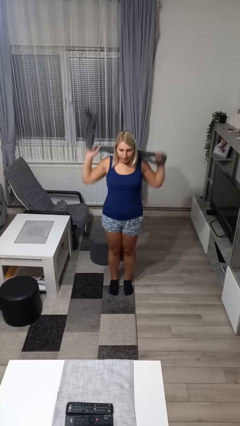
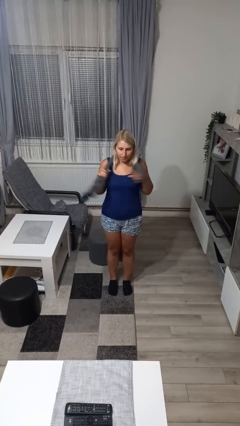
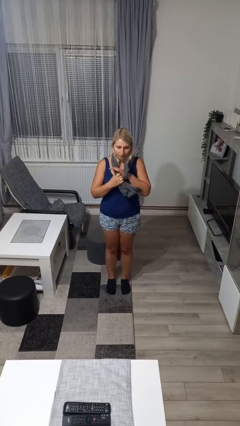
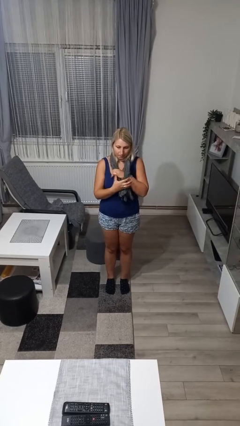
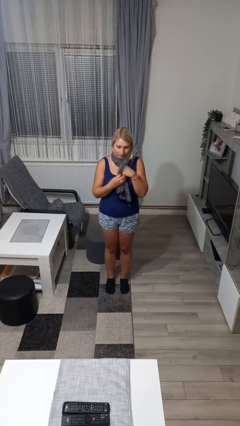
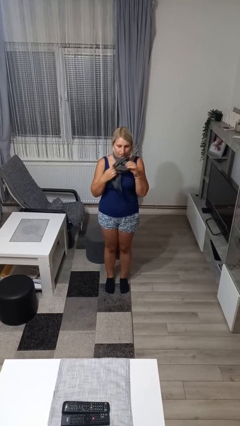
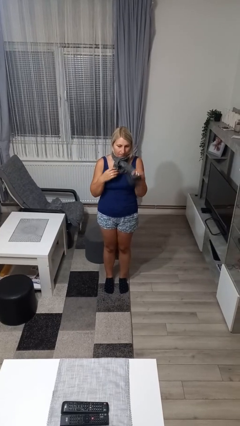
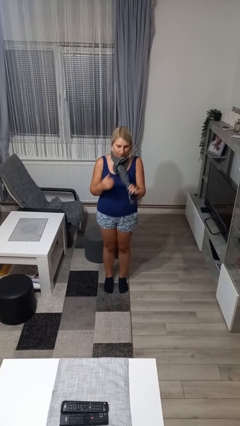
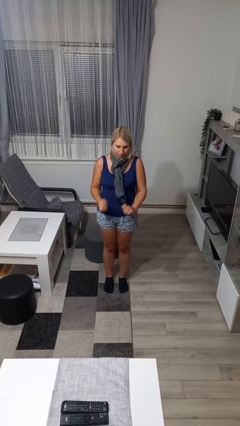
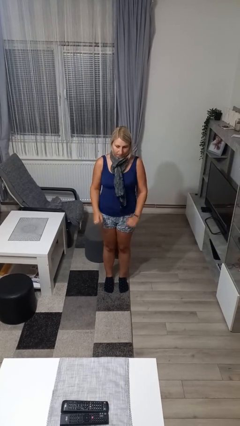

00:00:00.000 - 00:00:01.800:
person puts on scarf

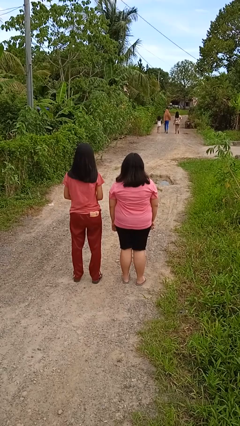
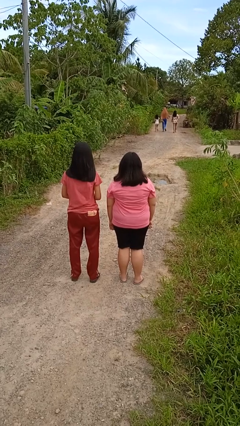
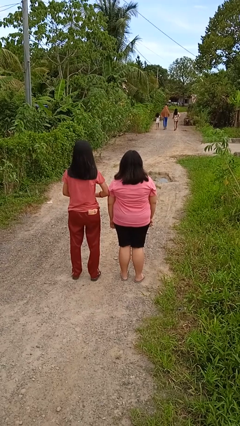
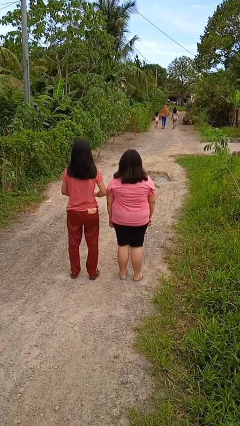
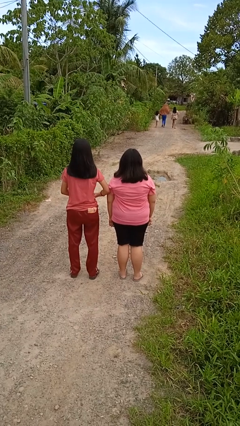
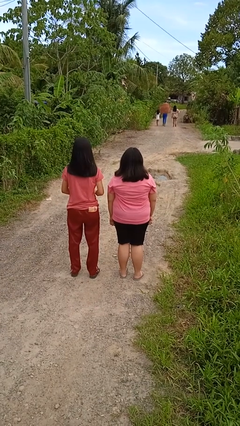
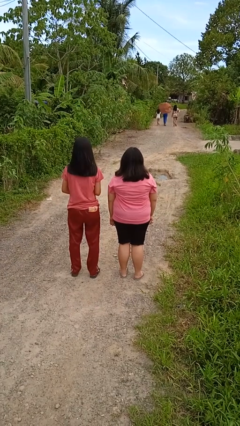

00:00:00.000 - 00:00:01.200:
person nudges person with elbow

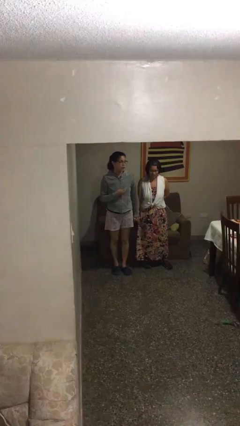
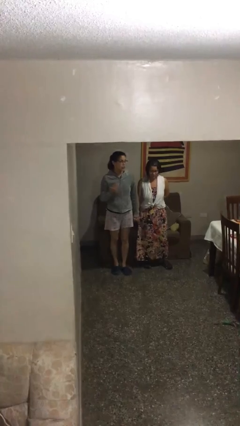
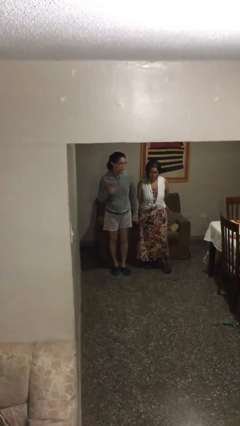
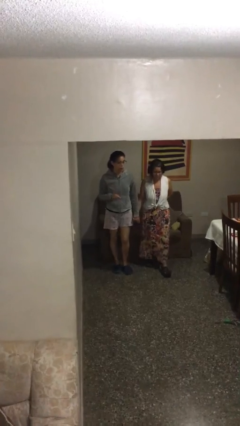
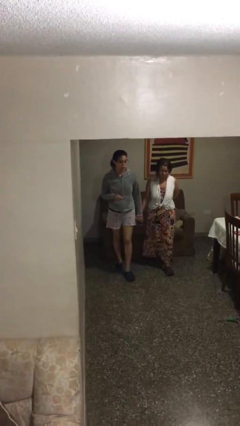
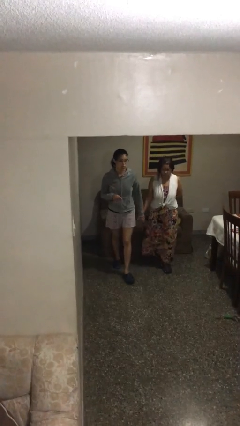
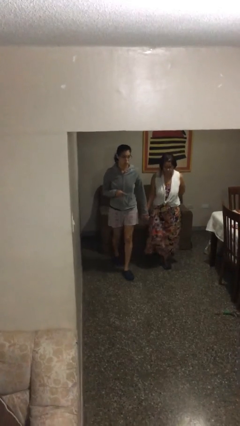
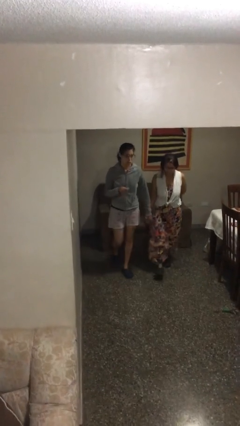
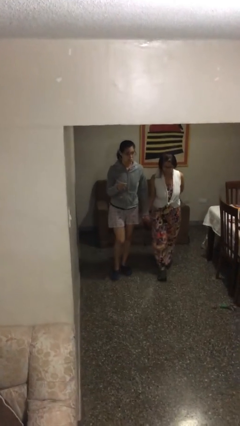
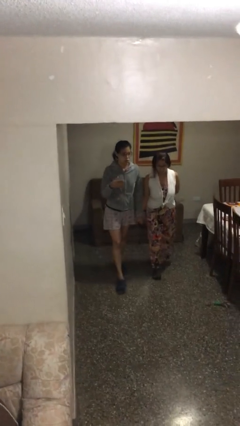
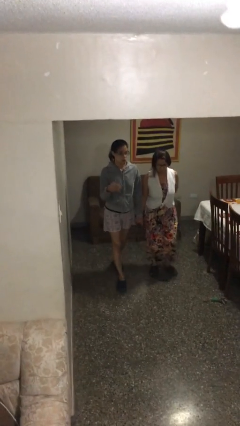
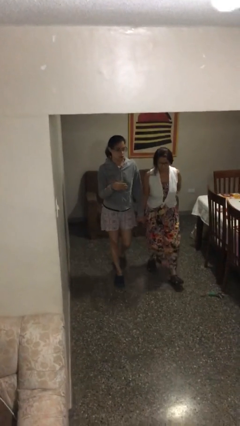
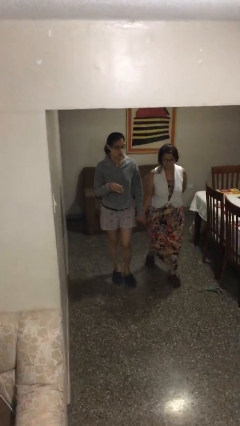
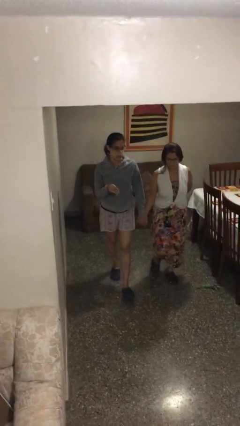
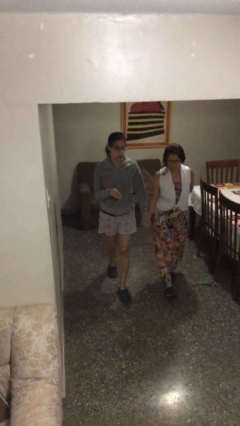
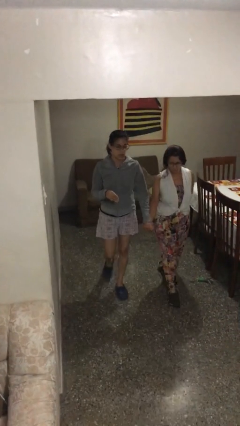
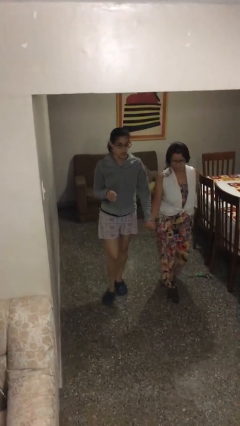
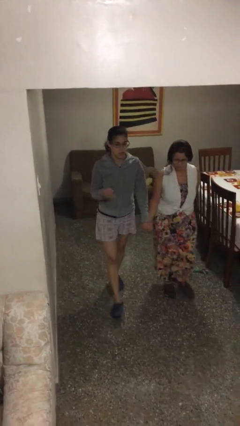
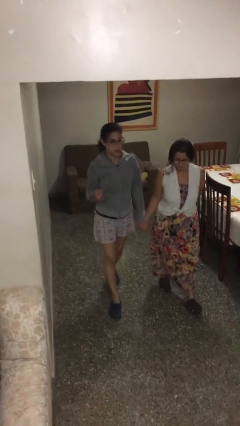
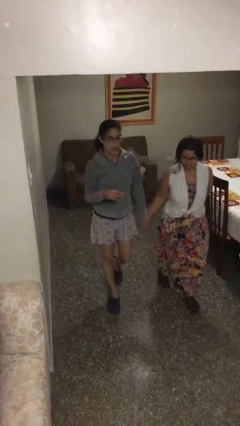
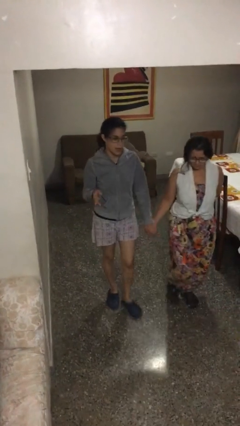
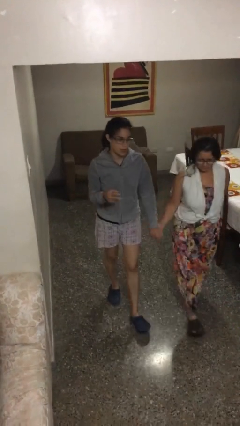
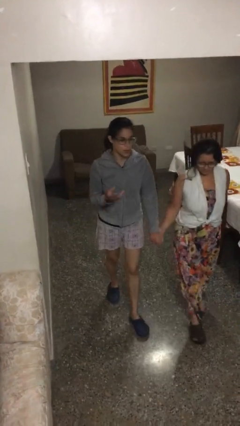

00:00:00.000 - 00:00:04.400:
person holds hand

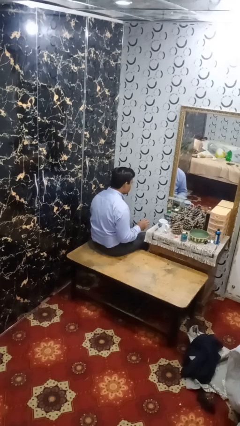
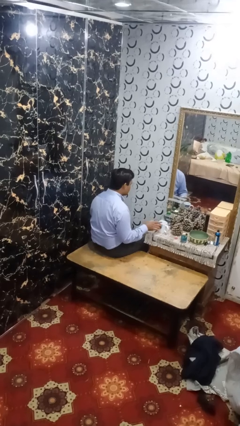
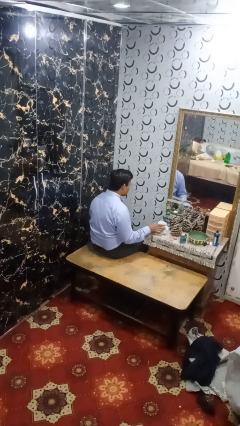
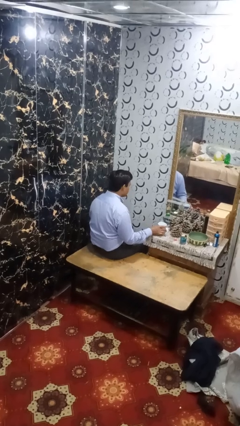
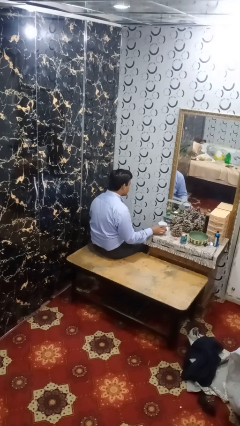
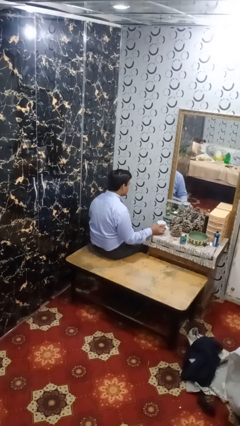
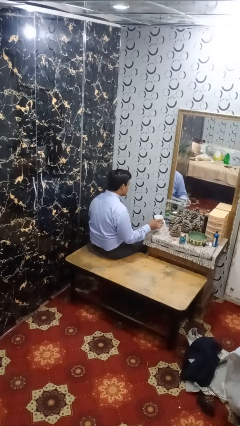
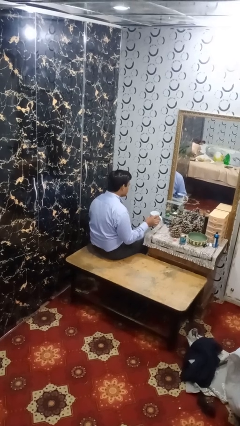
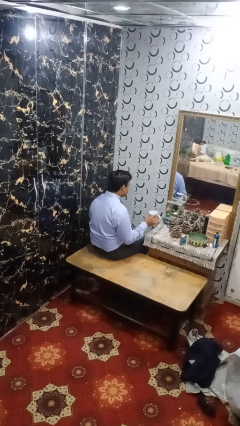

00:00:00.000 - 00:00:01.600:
person picks up object from table

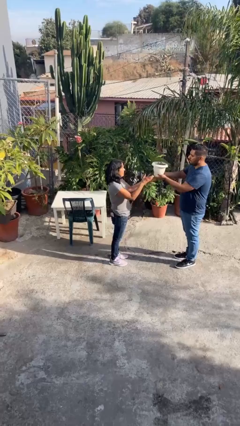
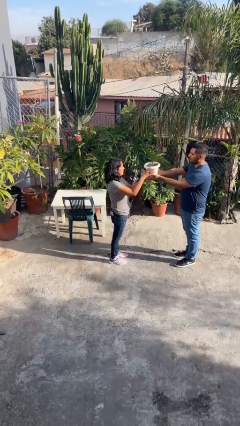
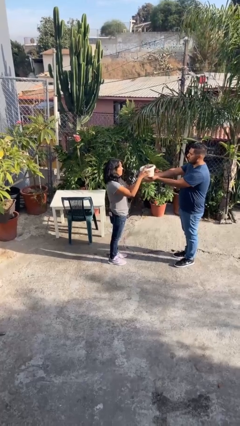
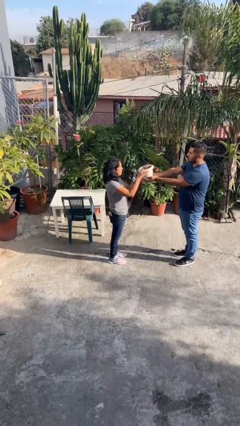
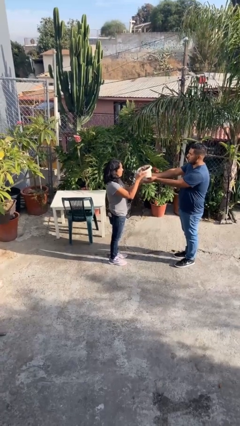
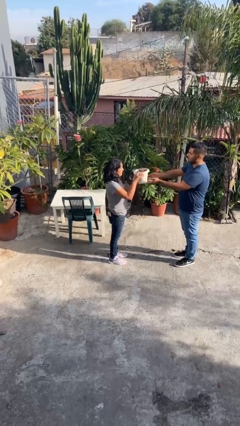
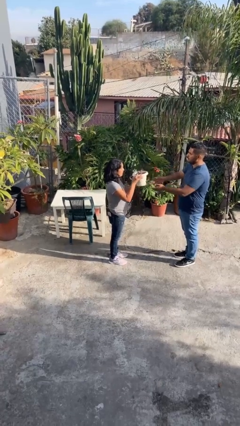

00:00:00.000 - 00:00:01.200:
person transfers object to person

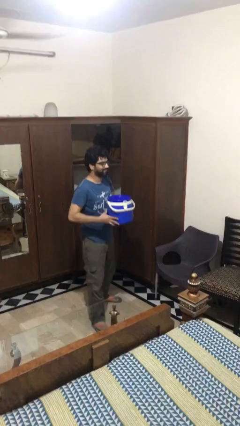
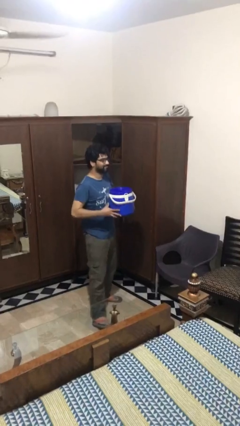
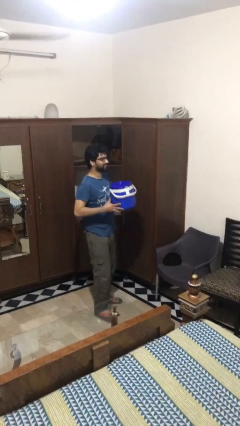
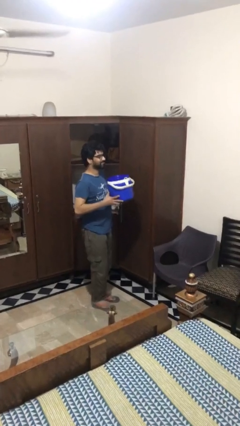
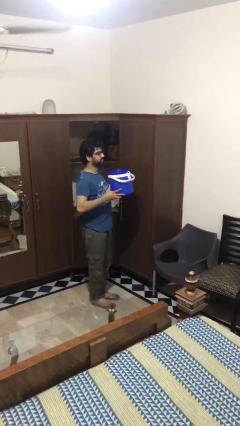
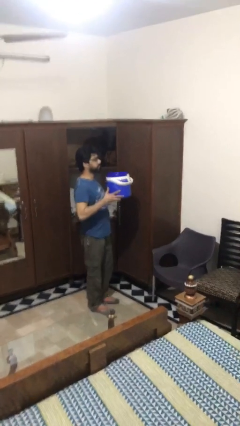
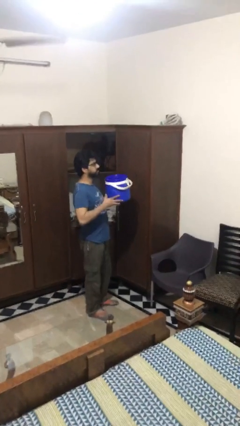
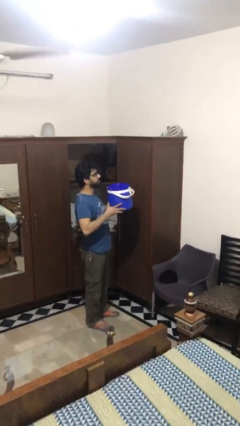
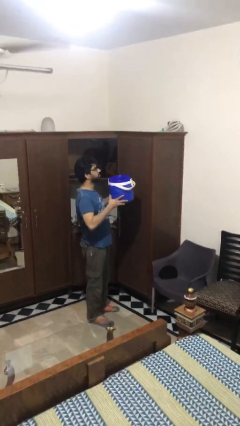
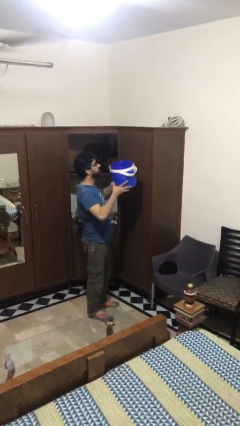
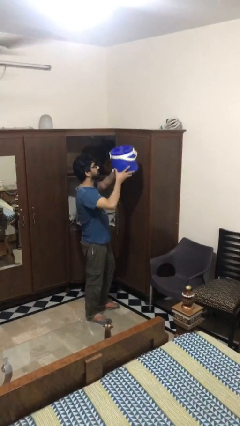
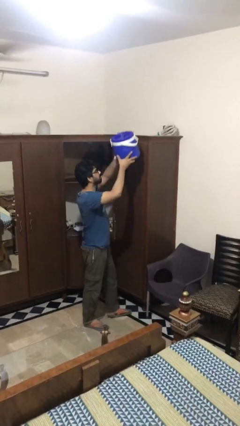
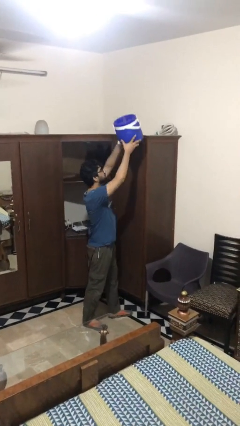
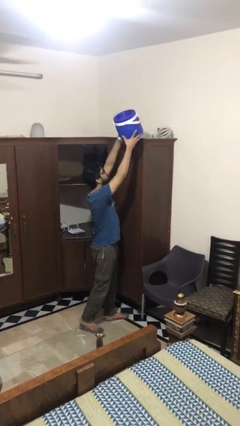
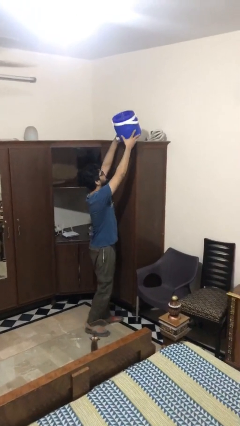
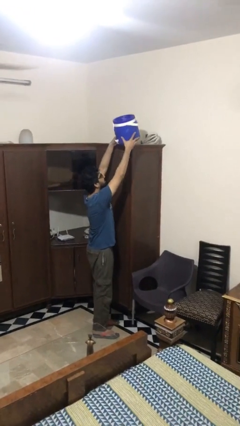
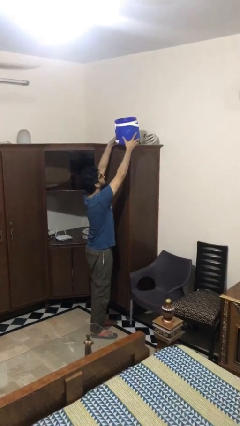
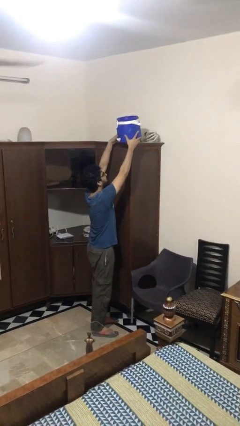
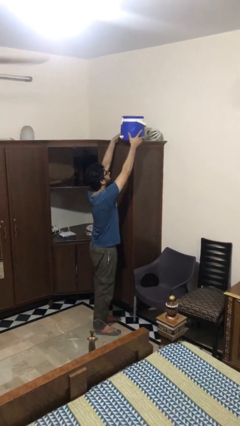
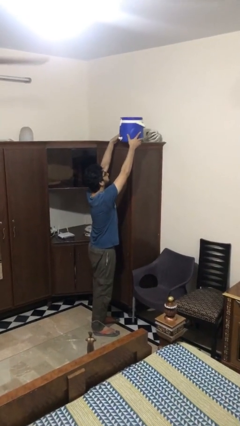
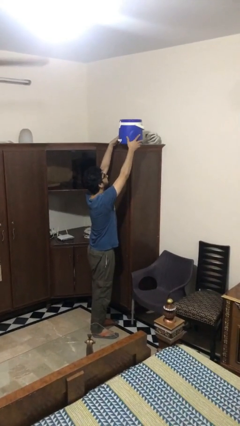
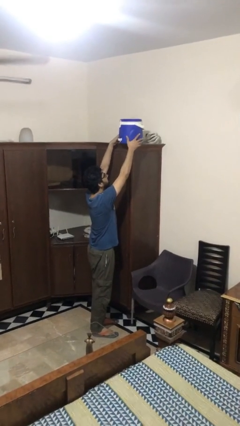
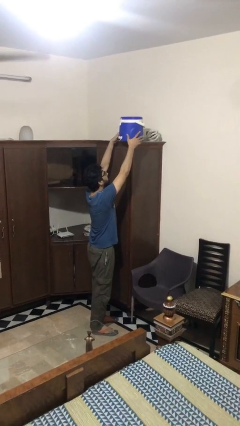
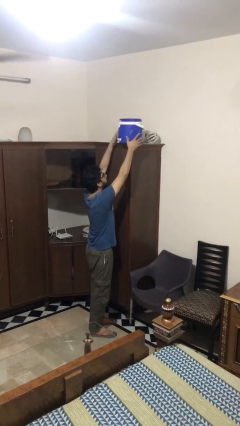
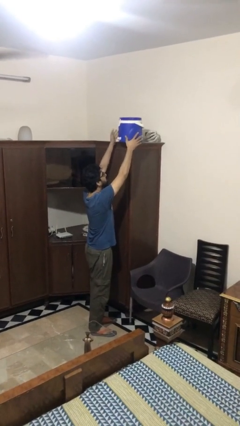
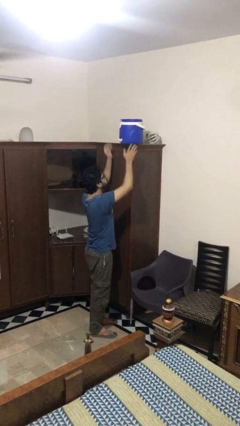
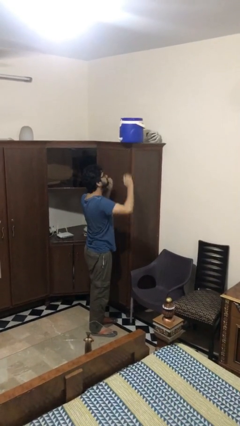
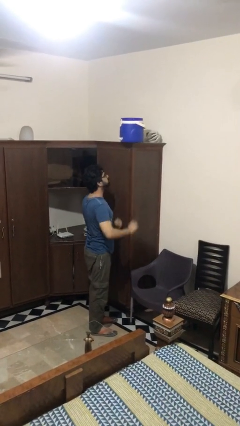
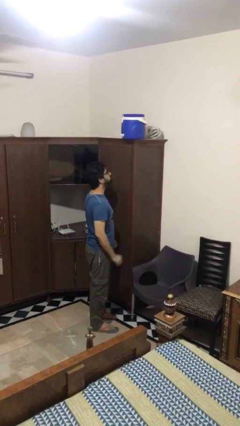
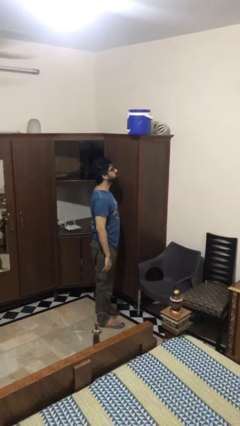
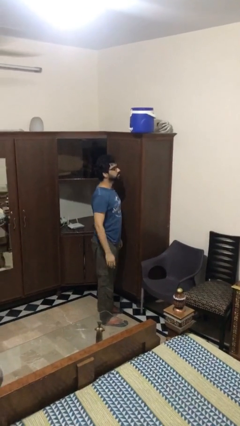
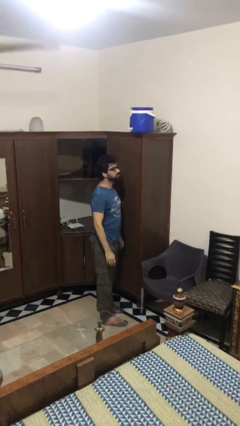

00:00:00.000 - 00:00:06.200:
person puts down object on shelf

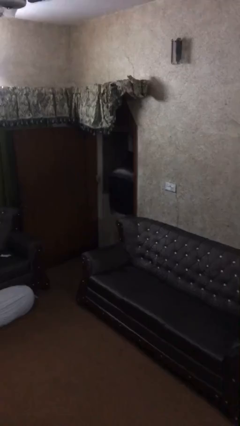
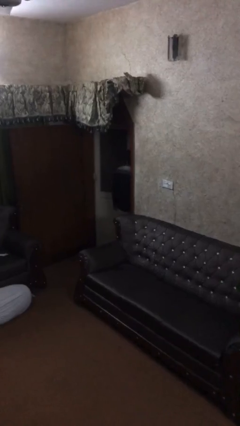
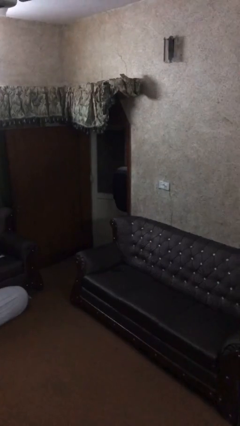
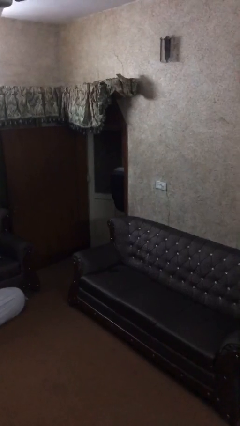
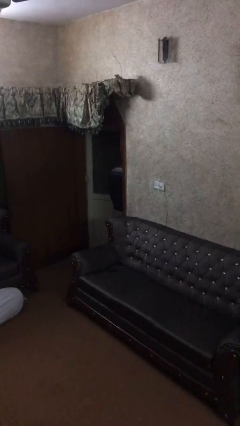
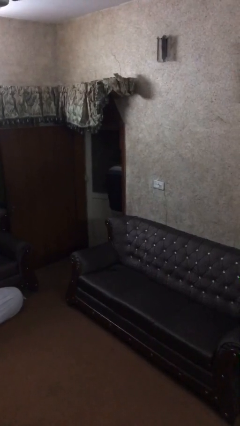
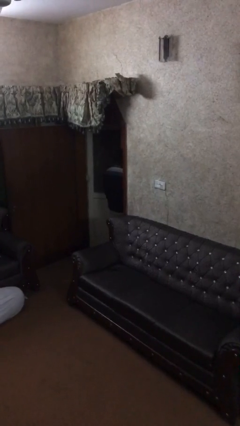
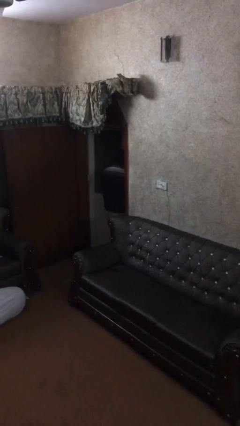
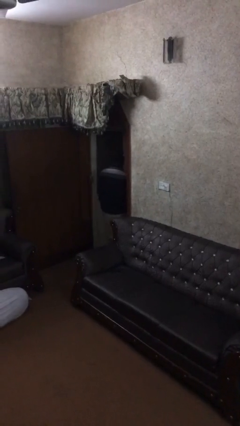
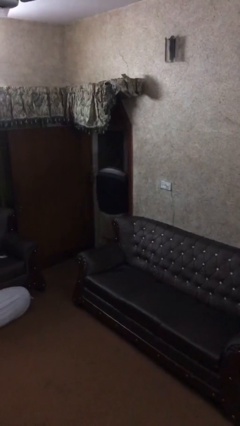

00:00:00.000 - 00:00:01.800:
person opens facility door
